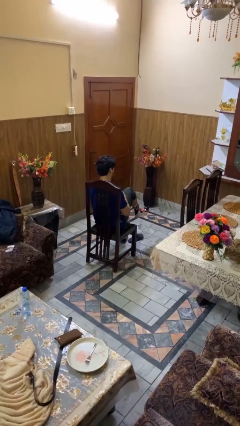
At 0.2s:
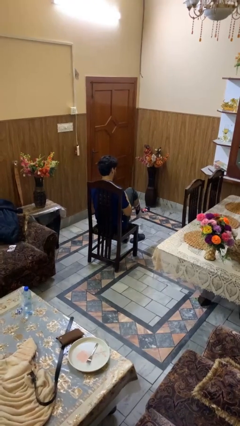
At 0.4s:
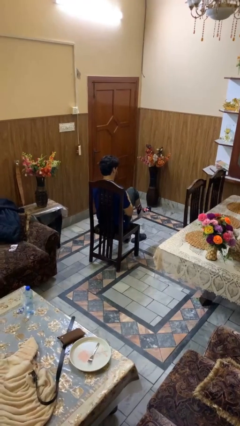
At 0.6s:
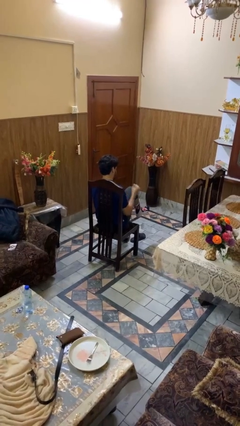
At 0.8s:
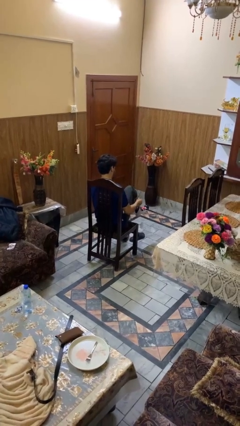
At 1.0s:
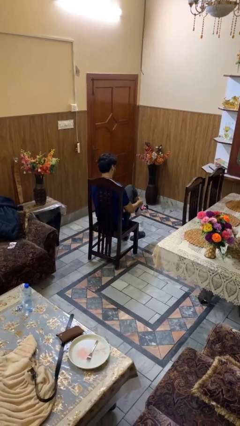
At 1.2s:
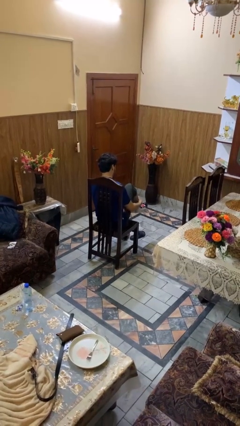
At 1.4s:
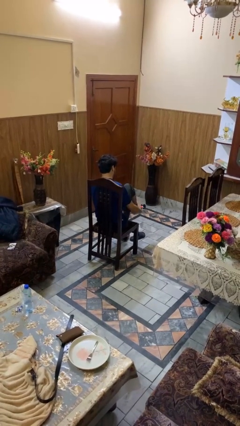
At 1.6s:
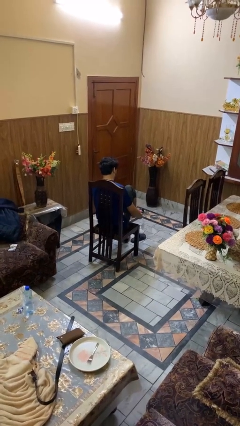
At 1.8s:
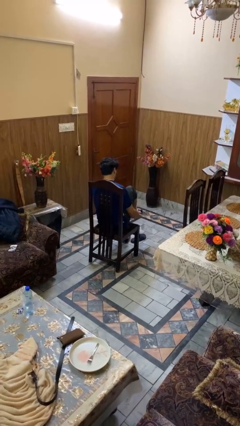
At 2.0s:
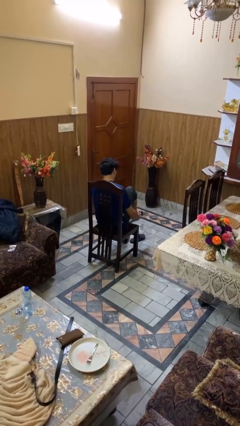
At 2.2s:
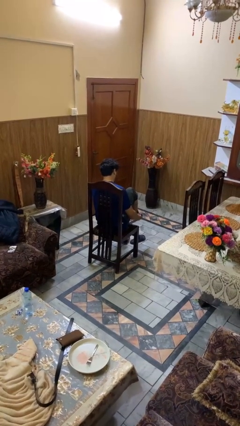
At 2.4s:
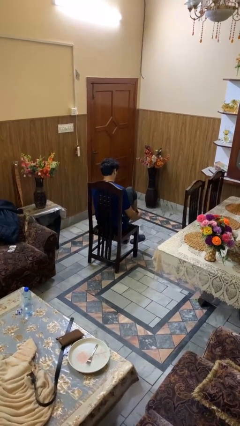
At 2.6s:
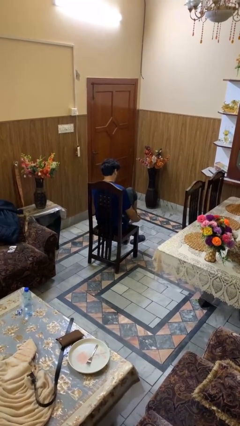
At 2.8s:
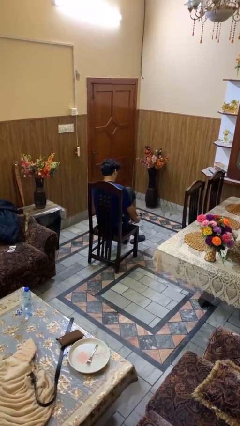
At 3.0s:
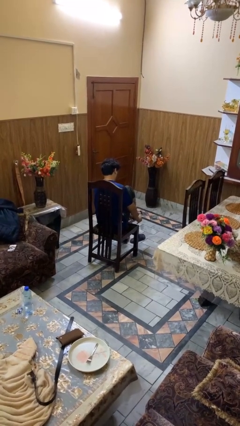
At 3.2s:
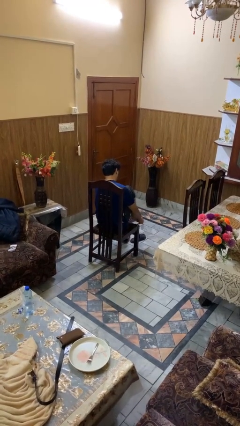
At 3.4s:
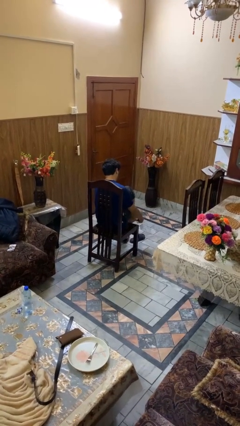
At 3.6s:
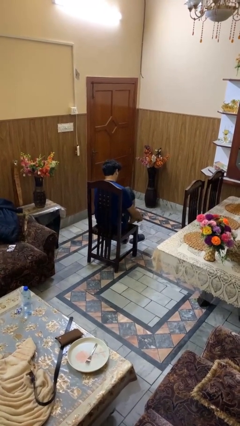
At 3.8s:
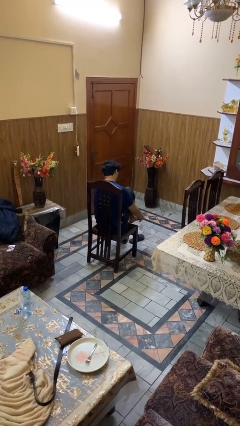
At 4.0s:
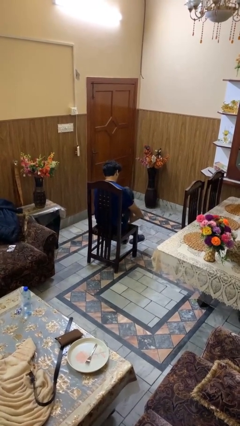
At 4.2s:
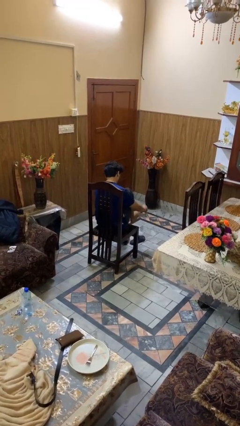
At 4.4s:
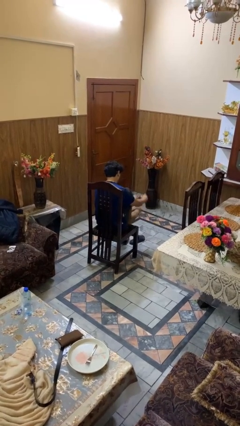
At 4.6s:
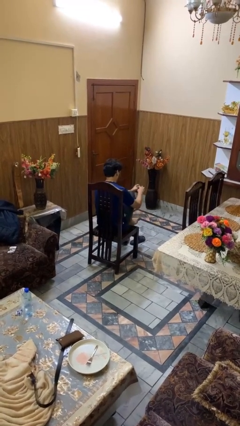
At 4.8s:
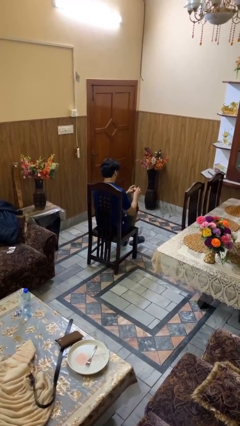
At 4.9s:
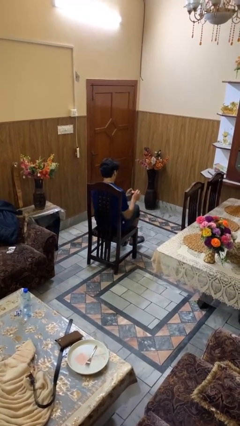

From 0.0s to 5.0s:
person takes off socks

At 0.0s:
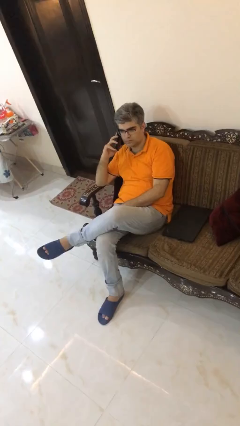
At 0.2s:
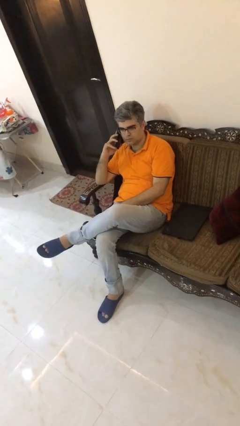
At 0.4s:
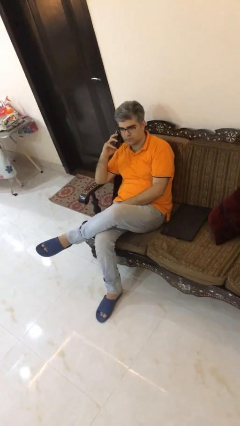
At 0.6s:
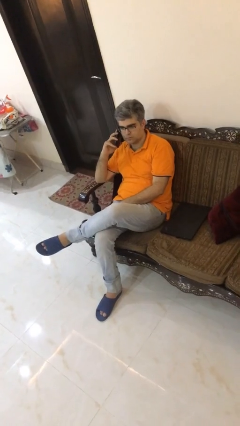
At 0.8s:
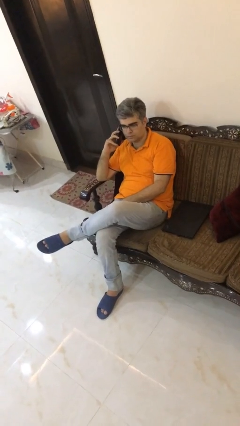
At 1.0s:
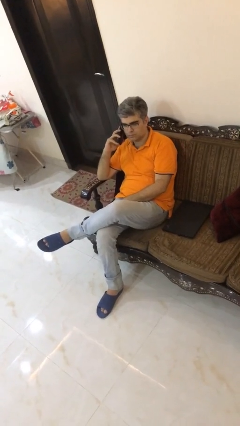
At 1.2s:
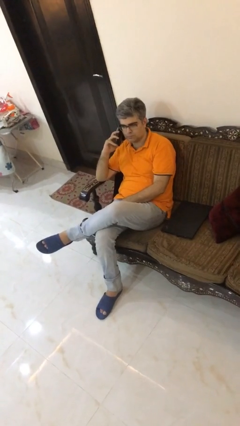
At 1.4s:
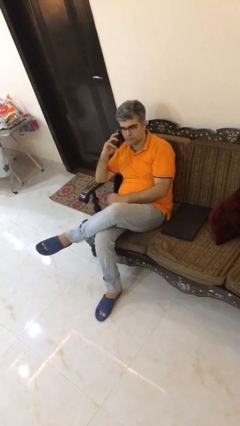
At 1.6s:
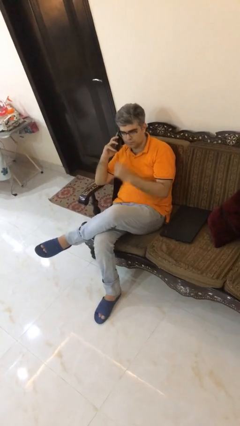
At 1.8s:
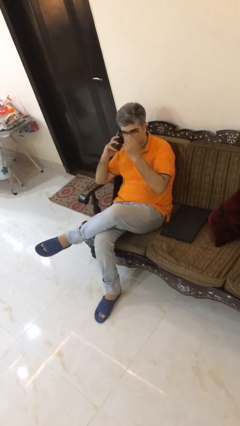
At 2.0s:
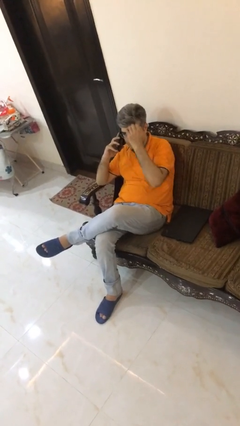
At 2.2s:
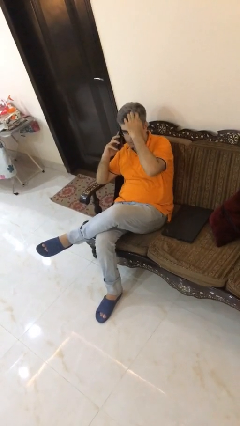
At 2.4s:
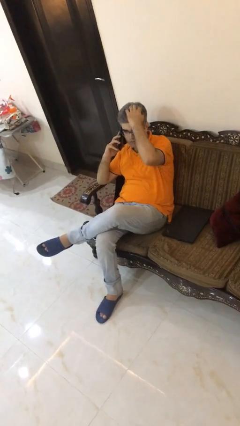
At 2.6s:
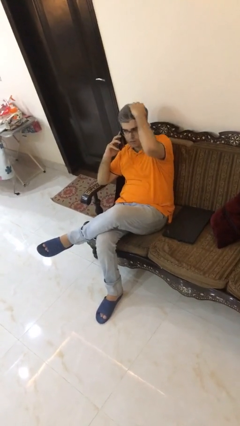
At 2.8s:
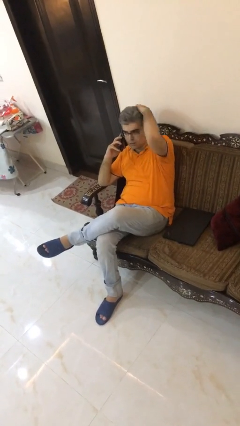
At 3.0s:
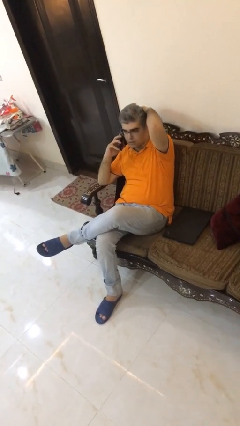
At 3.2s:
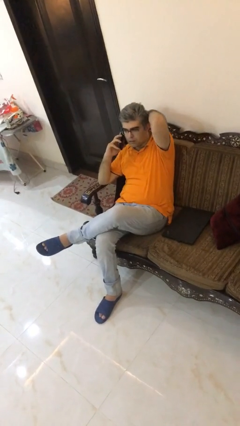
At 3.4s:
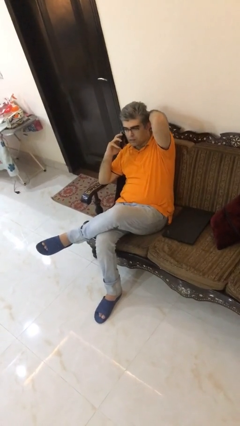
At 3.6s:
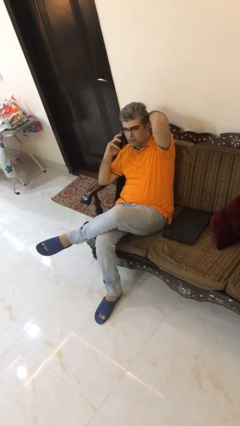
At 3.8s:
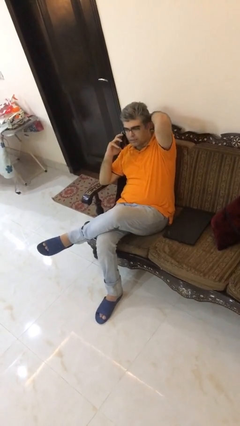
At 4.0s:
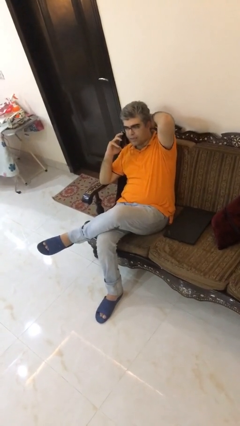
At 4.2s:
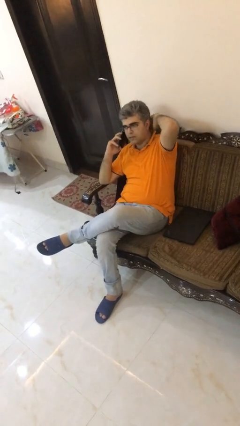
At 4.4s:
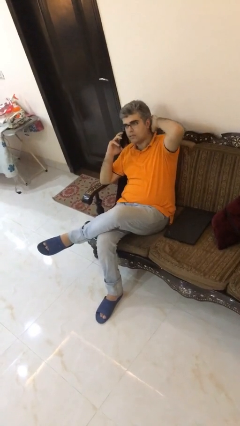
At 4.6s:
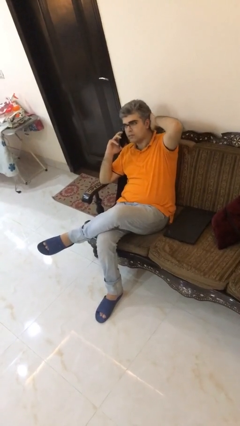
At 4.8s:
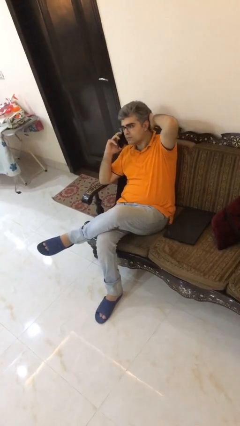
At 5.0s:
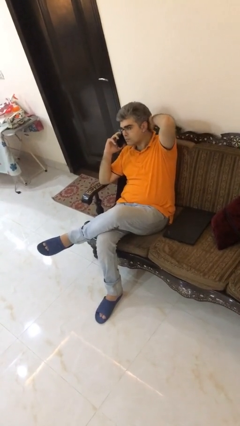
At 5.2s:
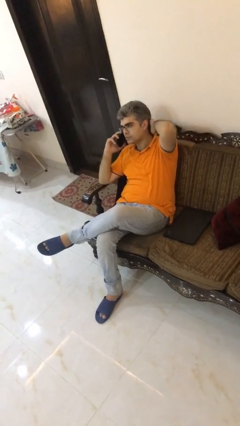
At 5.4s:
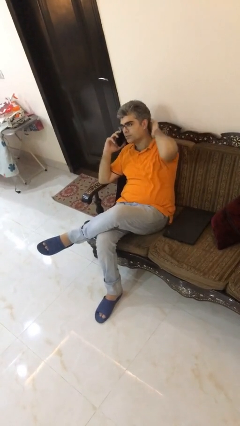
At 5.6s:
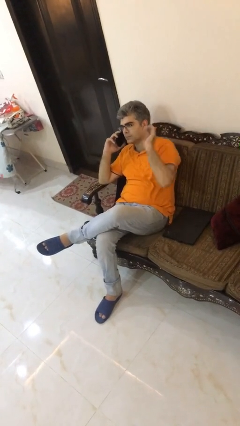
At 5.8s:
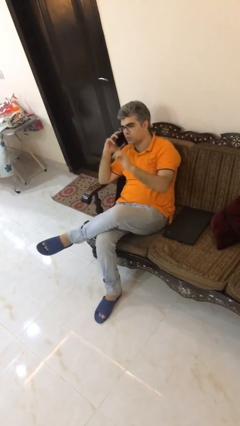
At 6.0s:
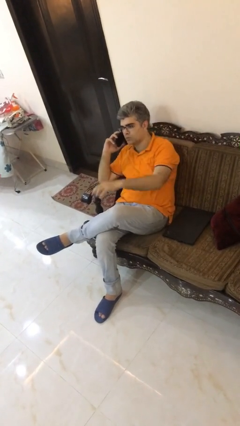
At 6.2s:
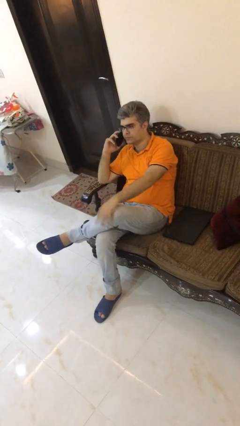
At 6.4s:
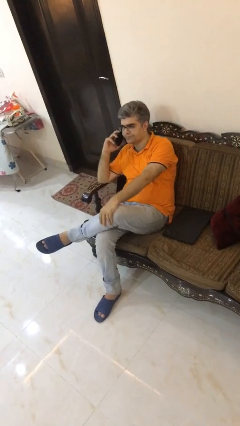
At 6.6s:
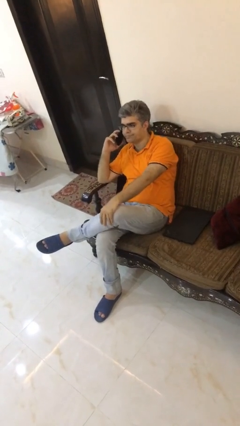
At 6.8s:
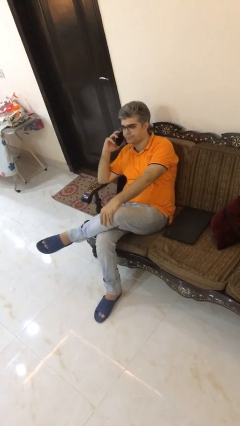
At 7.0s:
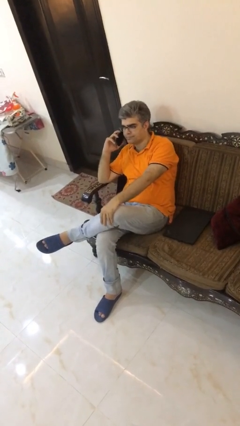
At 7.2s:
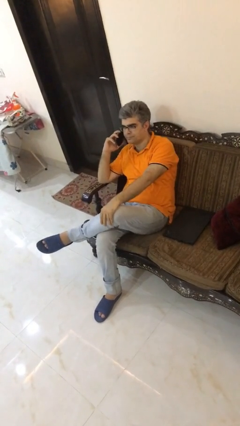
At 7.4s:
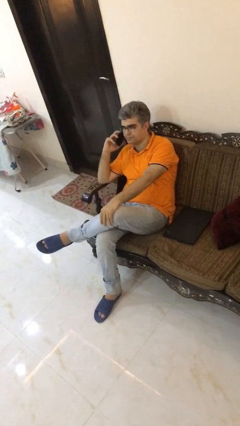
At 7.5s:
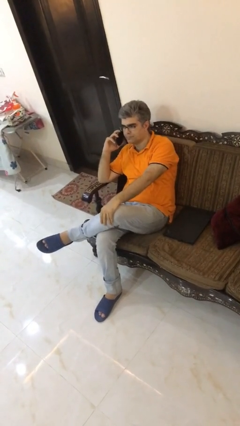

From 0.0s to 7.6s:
person talks on phone

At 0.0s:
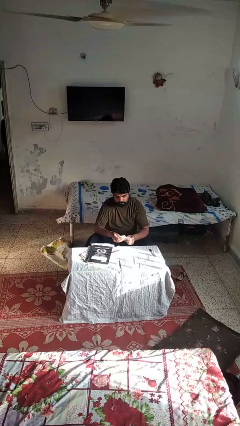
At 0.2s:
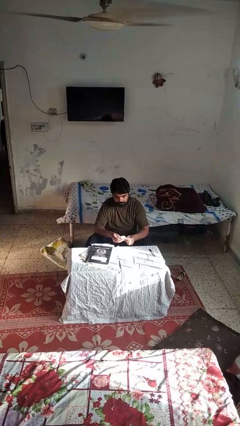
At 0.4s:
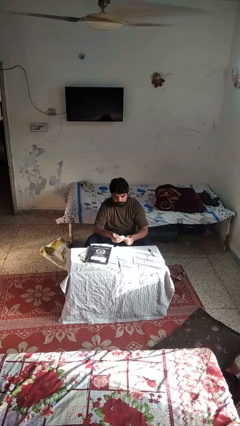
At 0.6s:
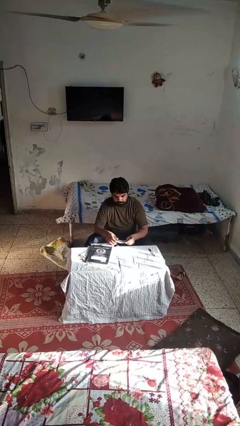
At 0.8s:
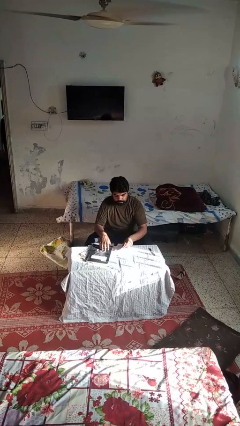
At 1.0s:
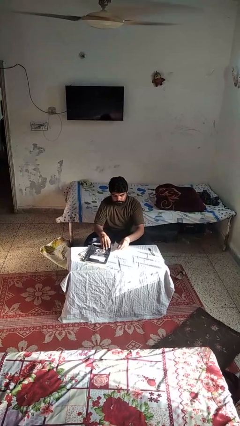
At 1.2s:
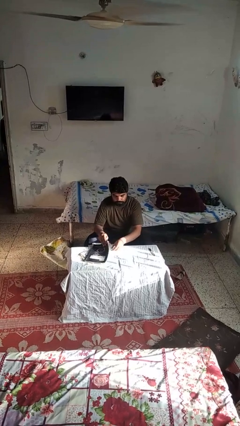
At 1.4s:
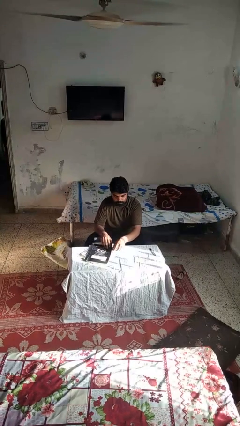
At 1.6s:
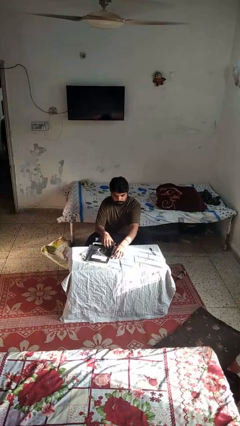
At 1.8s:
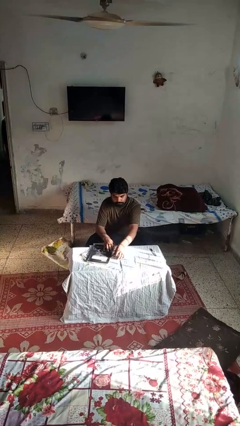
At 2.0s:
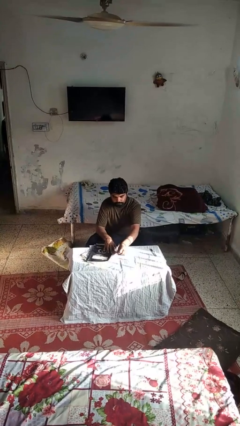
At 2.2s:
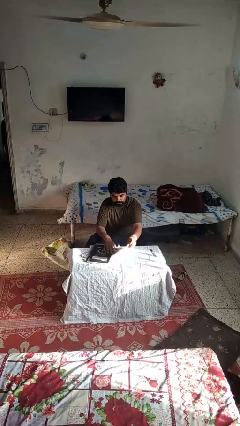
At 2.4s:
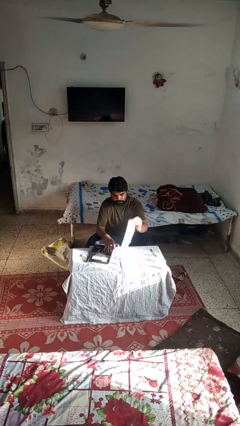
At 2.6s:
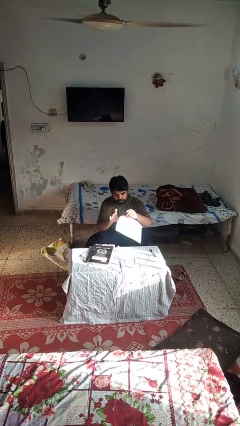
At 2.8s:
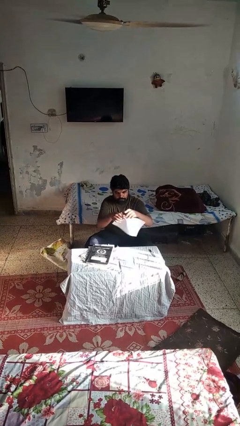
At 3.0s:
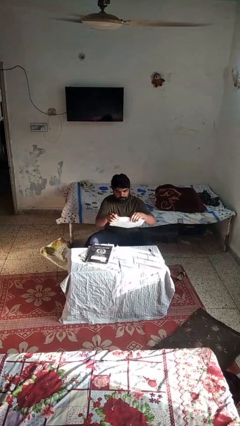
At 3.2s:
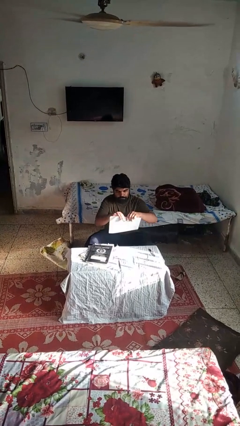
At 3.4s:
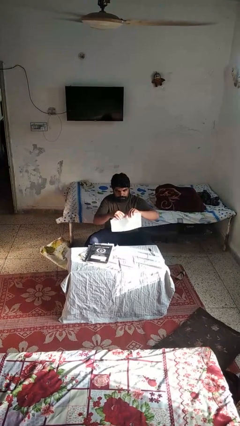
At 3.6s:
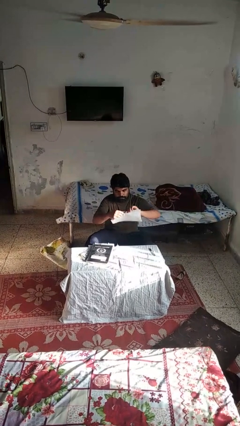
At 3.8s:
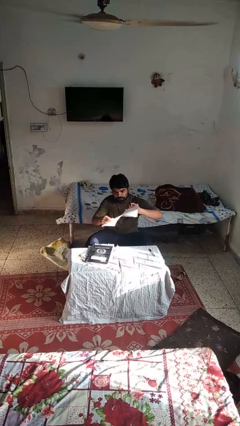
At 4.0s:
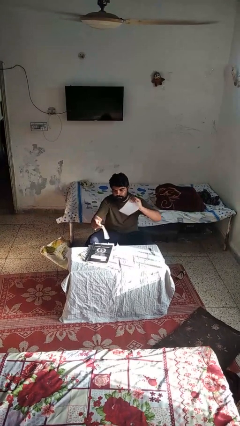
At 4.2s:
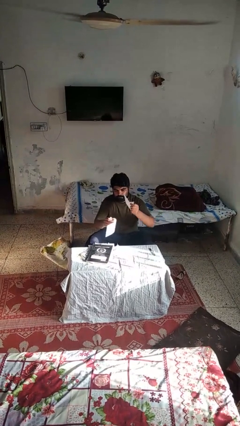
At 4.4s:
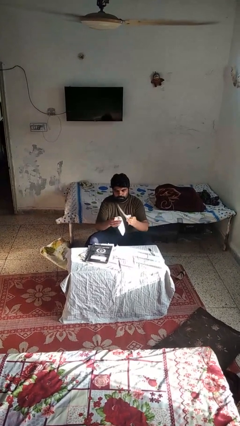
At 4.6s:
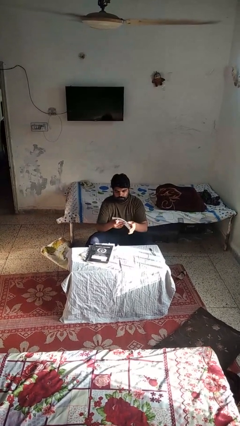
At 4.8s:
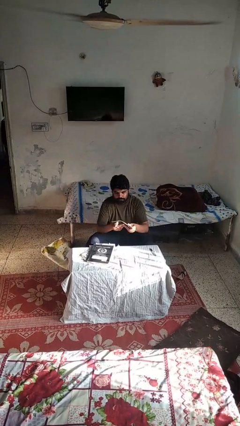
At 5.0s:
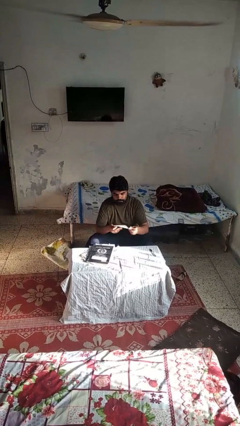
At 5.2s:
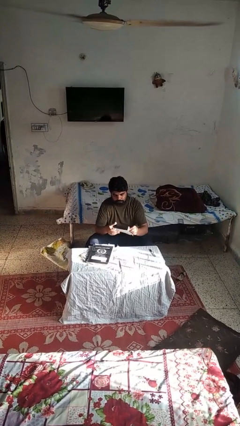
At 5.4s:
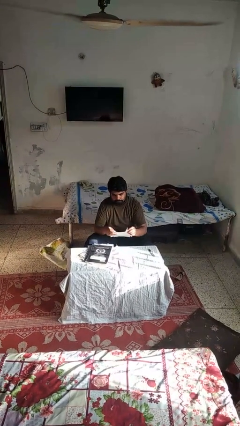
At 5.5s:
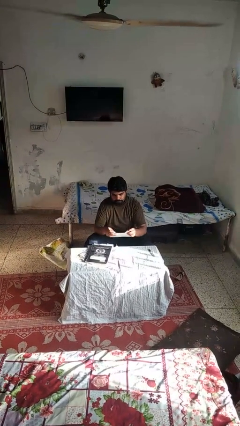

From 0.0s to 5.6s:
person tears paper
